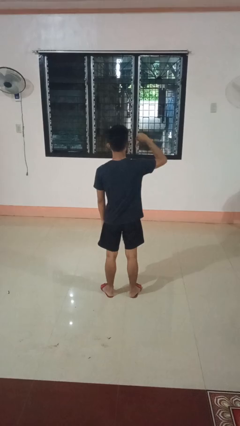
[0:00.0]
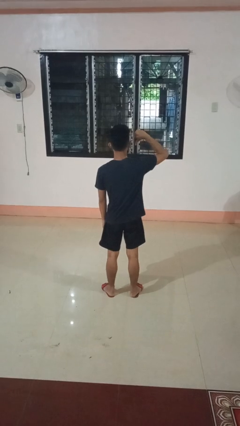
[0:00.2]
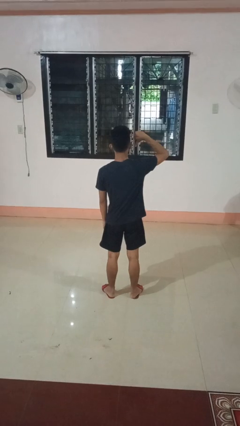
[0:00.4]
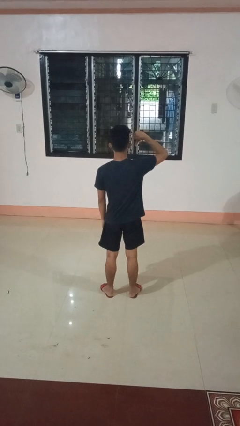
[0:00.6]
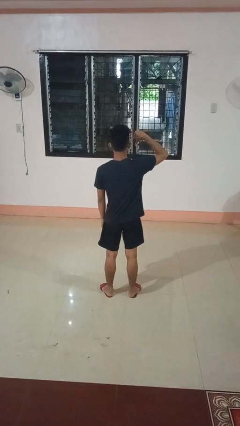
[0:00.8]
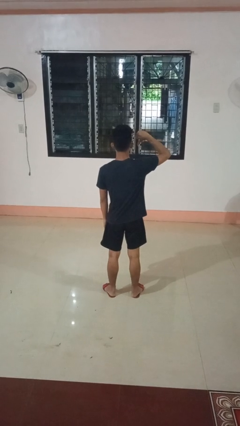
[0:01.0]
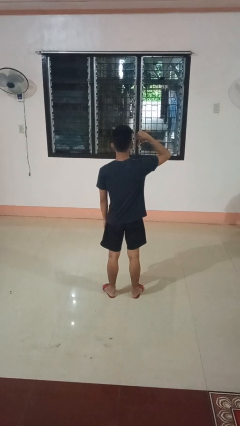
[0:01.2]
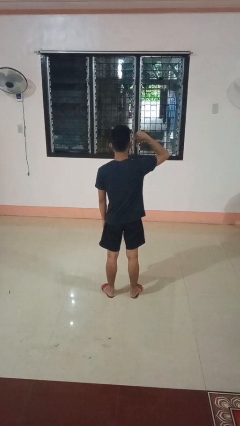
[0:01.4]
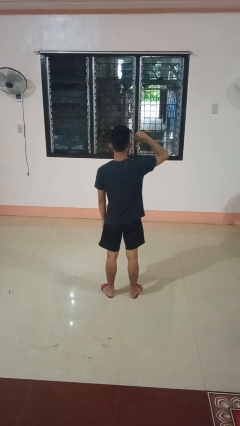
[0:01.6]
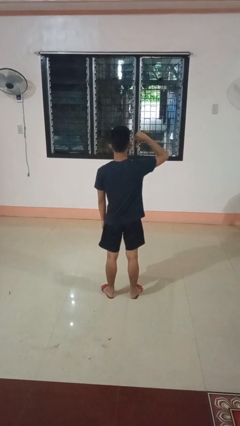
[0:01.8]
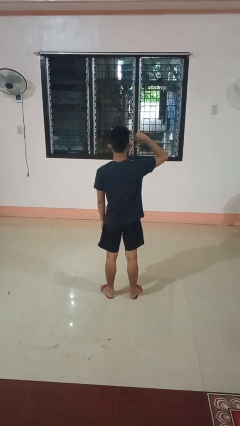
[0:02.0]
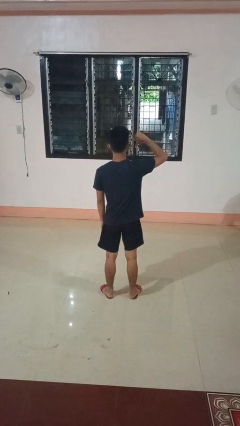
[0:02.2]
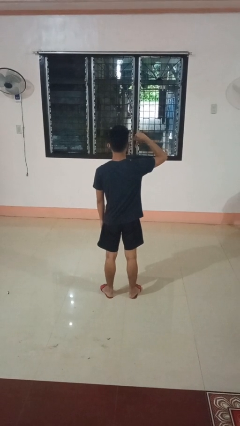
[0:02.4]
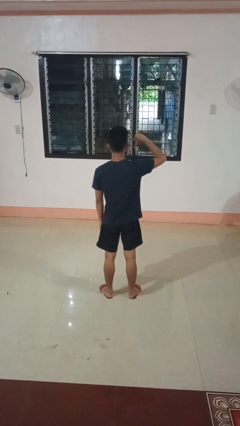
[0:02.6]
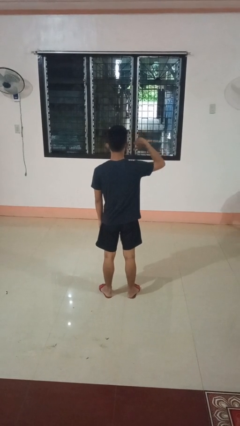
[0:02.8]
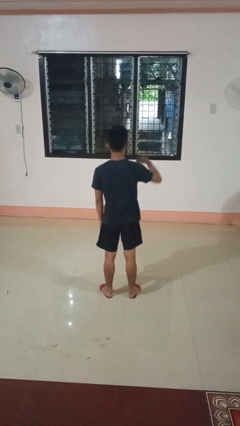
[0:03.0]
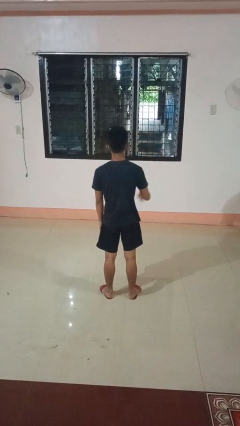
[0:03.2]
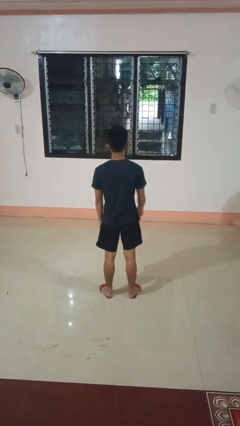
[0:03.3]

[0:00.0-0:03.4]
person gestures thumbs down

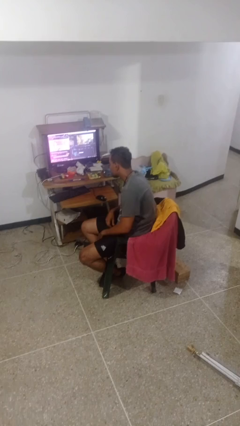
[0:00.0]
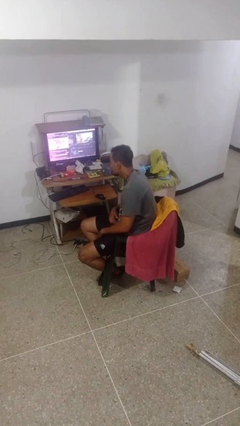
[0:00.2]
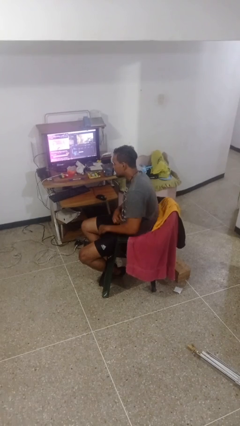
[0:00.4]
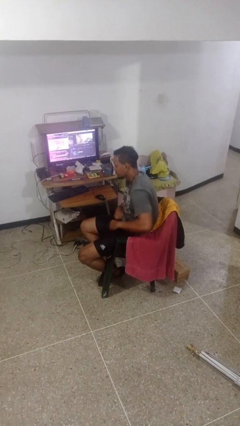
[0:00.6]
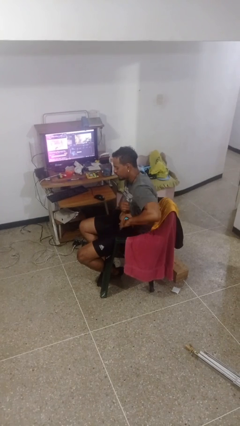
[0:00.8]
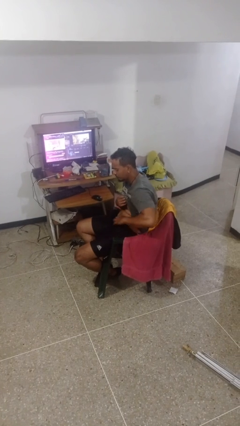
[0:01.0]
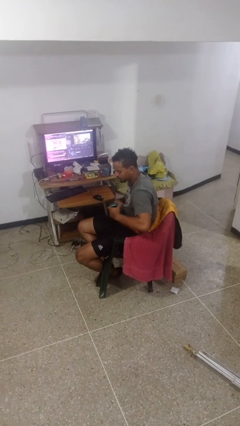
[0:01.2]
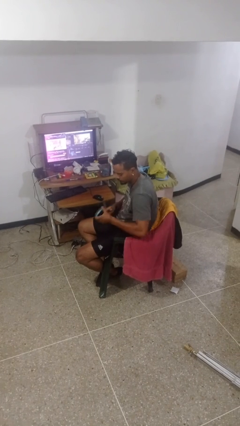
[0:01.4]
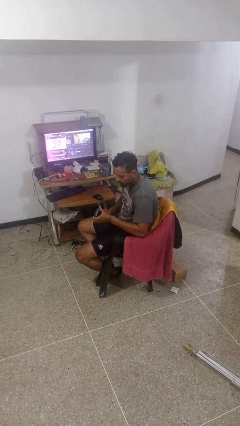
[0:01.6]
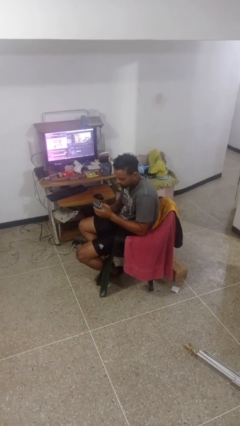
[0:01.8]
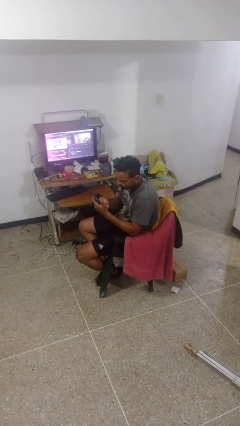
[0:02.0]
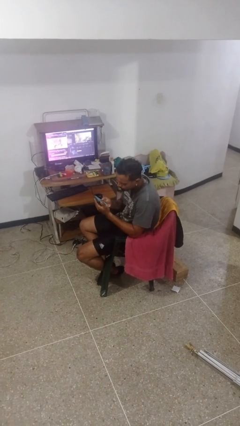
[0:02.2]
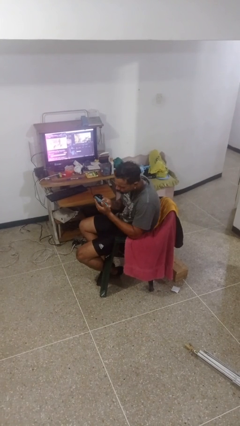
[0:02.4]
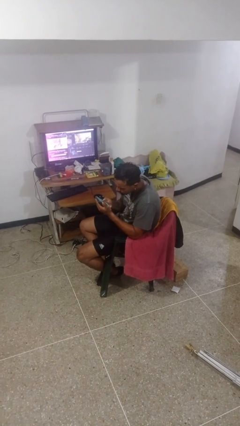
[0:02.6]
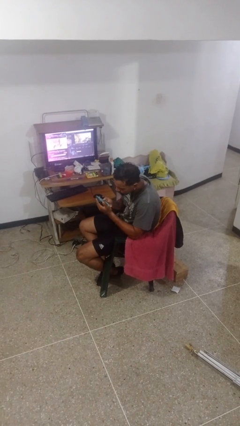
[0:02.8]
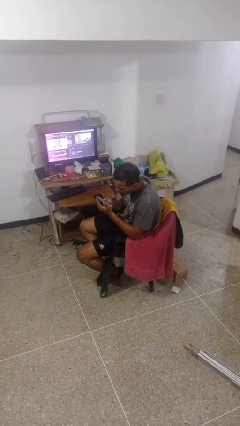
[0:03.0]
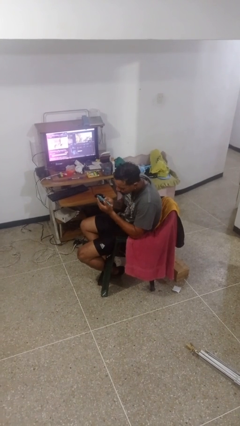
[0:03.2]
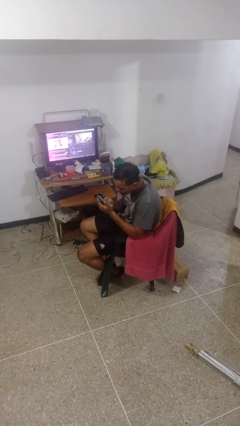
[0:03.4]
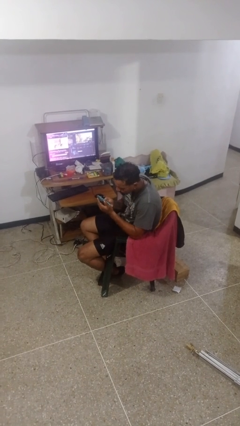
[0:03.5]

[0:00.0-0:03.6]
person takes phone from pocket

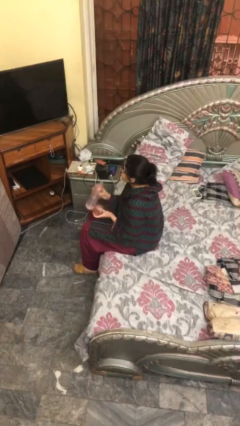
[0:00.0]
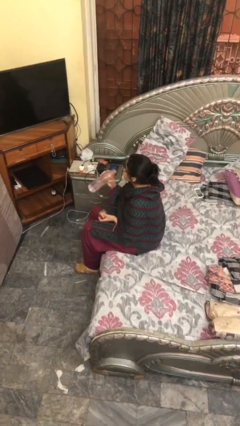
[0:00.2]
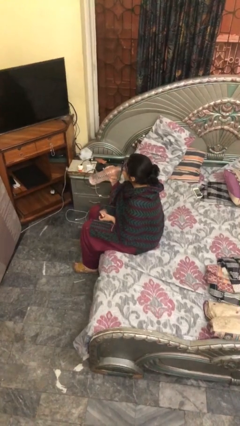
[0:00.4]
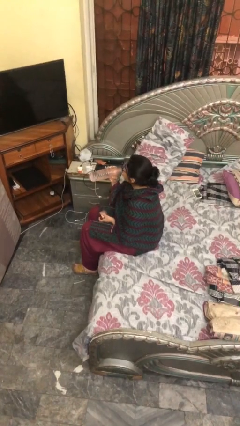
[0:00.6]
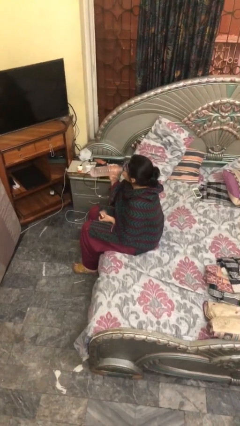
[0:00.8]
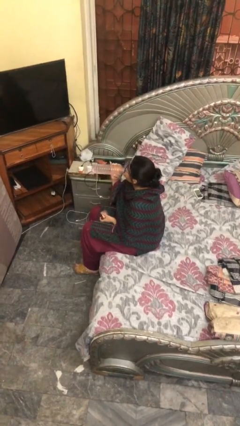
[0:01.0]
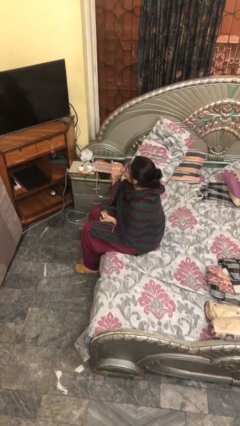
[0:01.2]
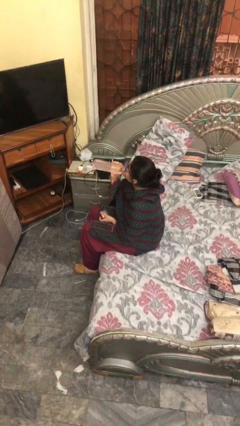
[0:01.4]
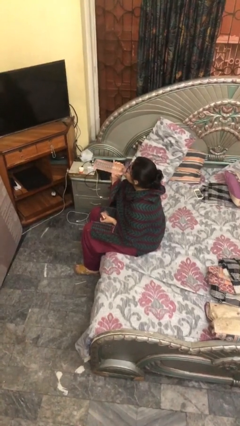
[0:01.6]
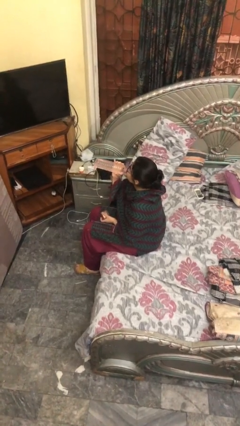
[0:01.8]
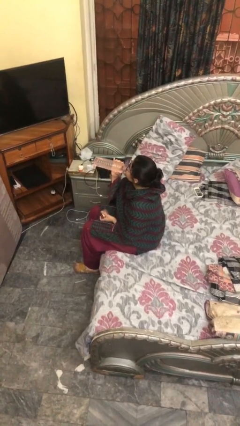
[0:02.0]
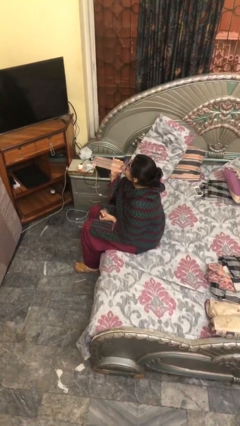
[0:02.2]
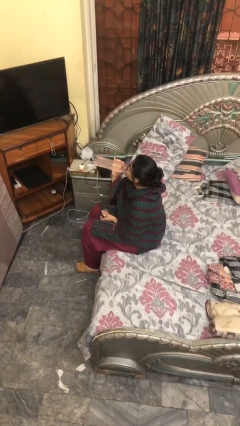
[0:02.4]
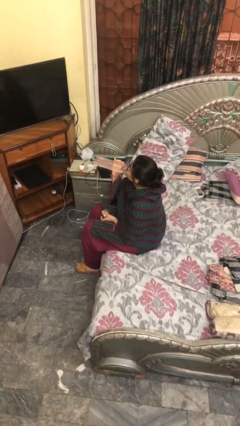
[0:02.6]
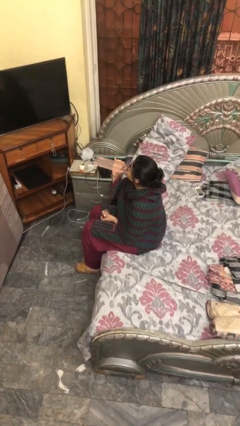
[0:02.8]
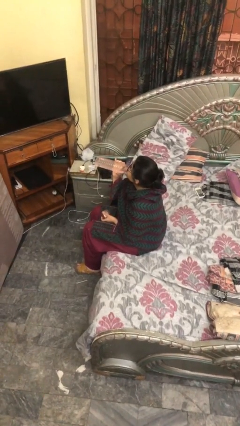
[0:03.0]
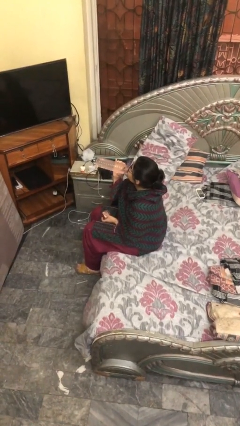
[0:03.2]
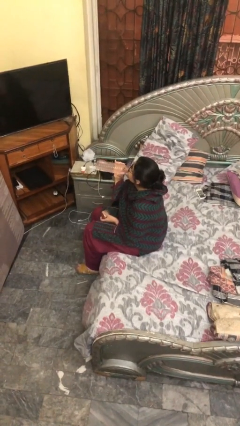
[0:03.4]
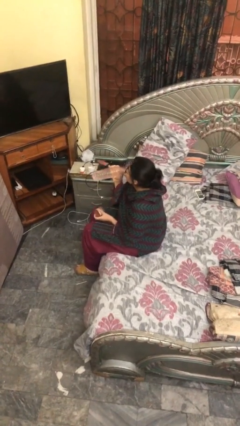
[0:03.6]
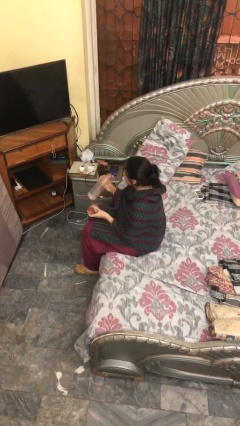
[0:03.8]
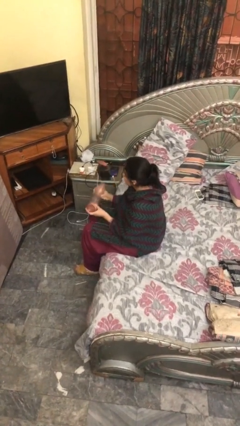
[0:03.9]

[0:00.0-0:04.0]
person drinks from bottle

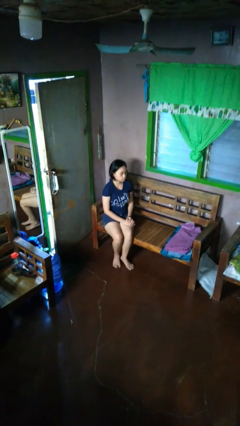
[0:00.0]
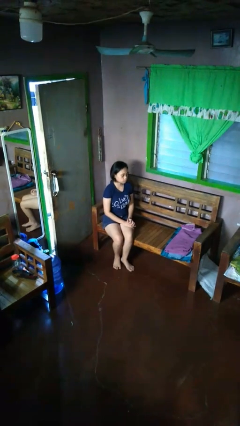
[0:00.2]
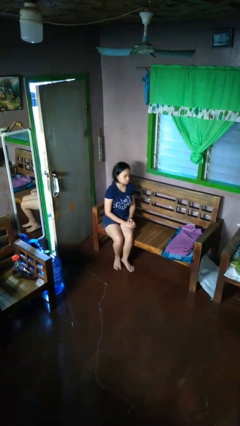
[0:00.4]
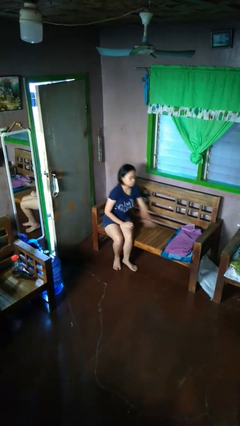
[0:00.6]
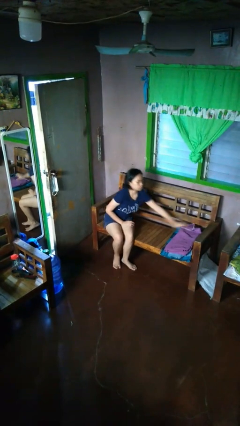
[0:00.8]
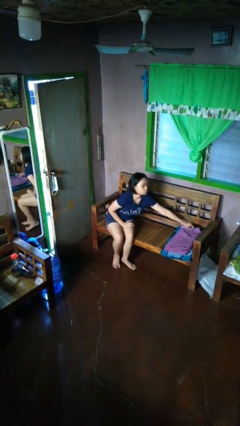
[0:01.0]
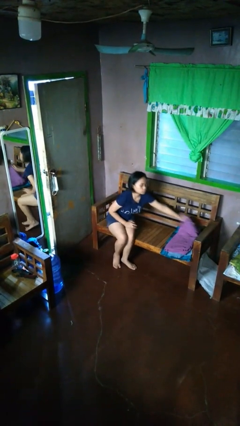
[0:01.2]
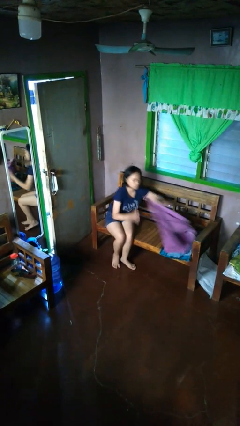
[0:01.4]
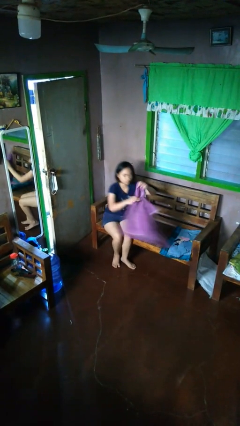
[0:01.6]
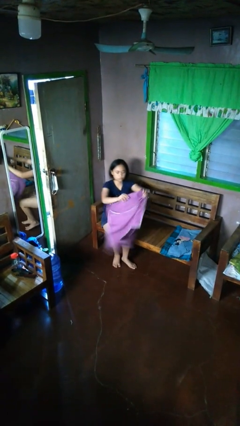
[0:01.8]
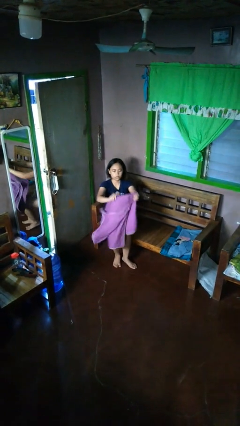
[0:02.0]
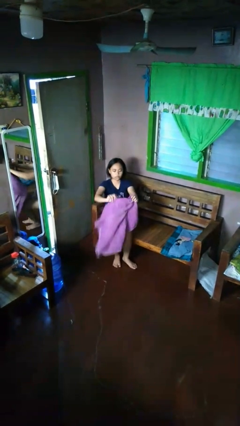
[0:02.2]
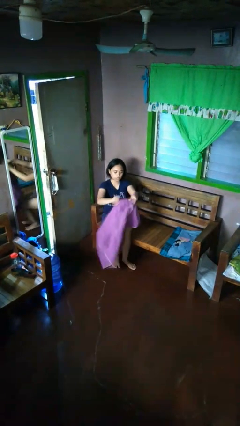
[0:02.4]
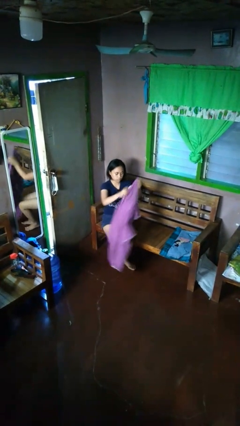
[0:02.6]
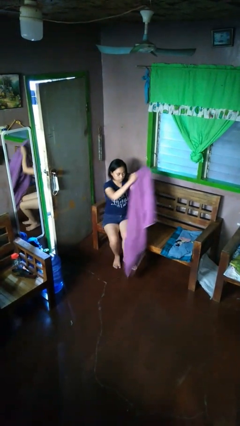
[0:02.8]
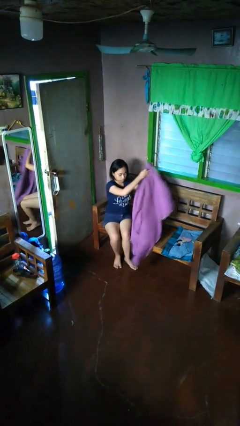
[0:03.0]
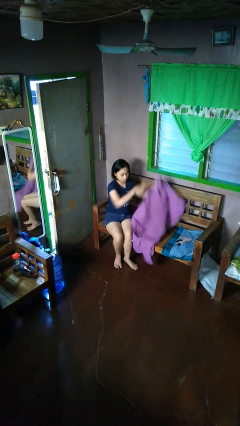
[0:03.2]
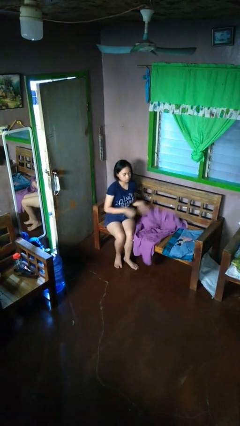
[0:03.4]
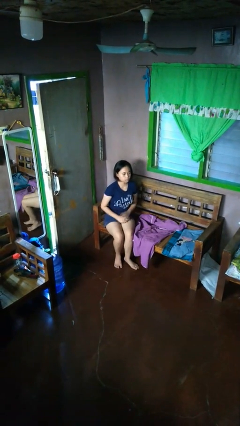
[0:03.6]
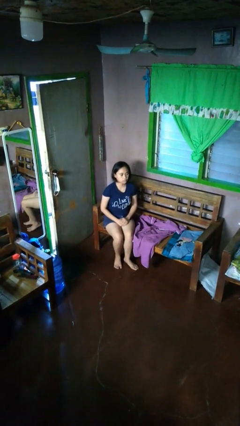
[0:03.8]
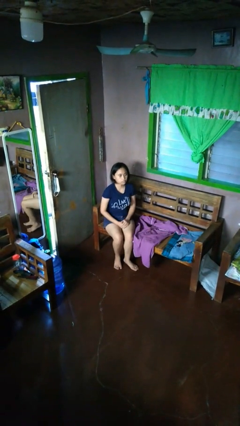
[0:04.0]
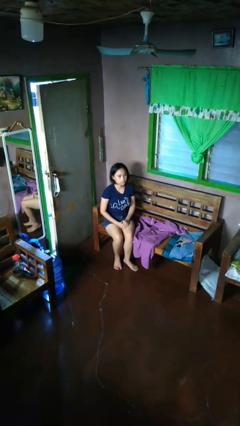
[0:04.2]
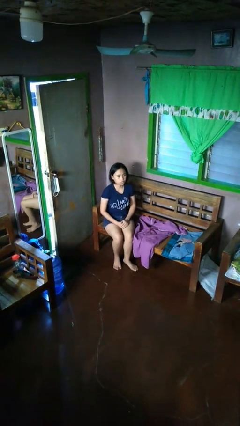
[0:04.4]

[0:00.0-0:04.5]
person unfolds blanket

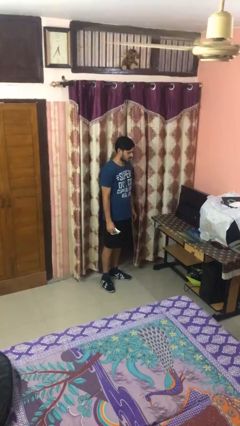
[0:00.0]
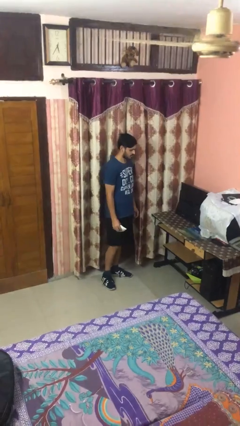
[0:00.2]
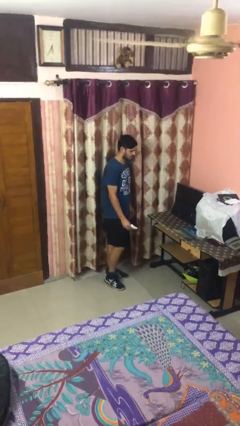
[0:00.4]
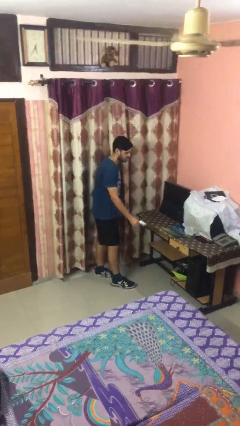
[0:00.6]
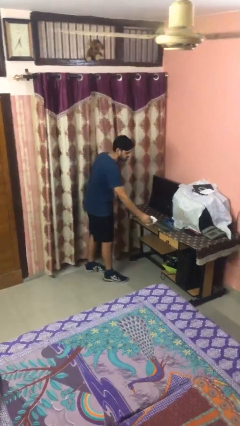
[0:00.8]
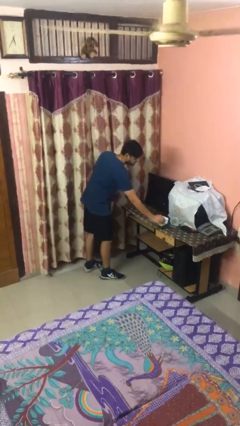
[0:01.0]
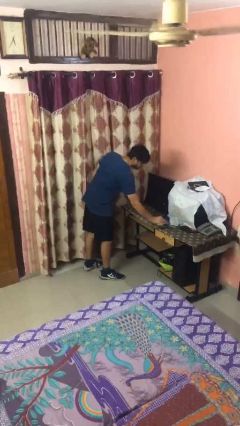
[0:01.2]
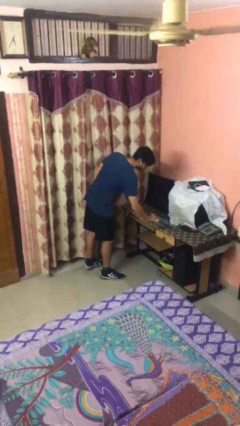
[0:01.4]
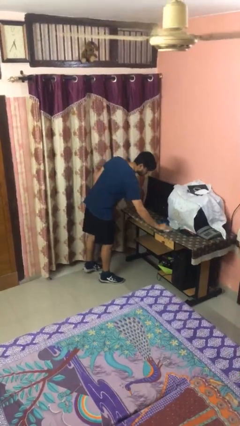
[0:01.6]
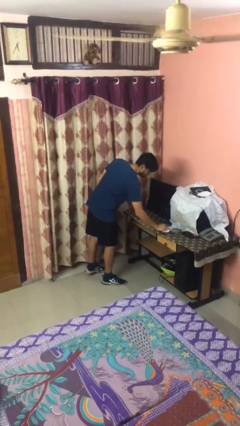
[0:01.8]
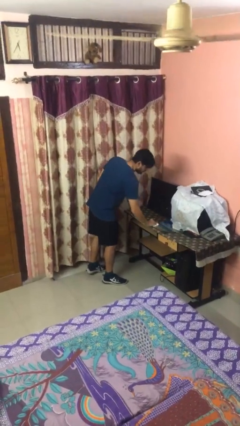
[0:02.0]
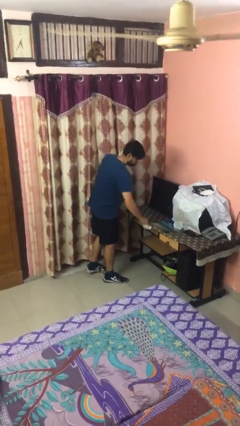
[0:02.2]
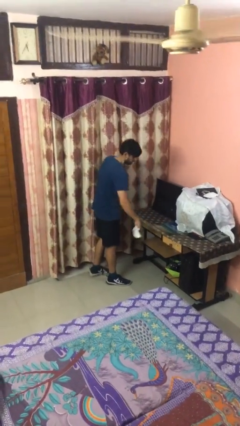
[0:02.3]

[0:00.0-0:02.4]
person cleans table with rag

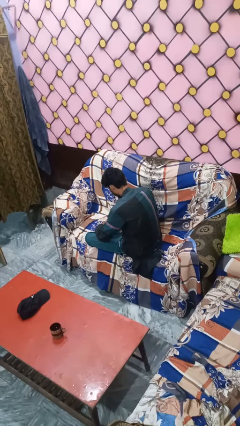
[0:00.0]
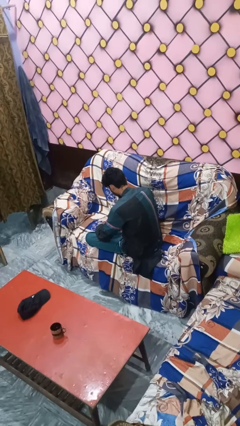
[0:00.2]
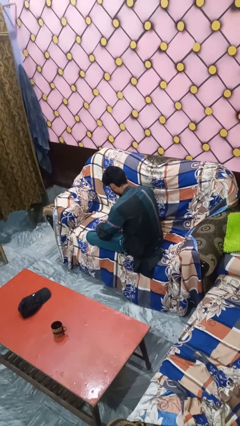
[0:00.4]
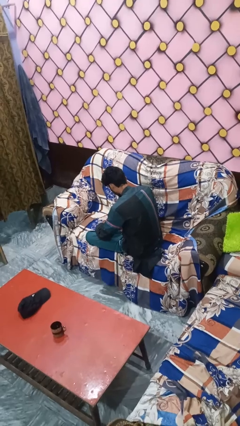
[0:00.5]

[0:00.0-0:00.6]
person pats head
